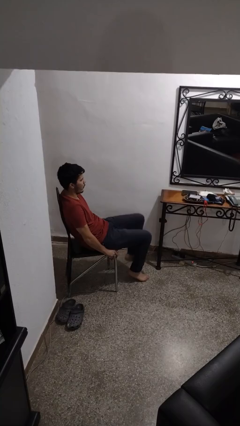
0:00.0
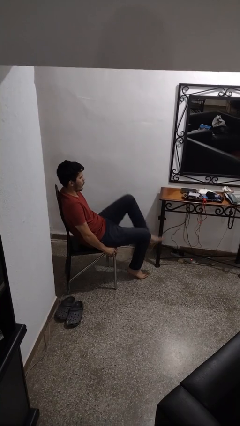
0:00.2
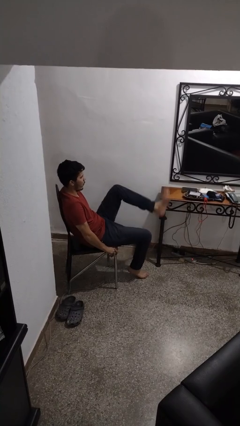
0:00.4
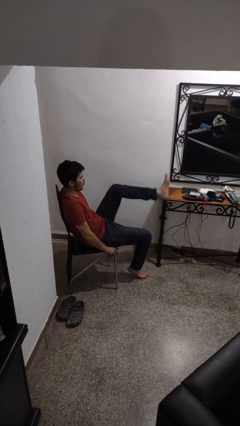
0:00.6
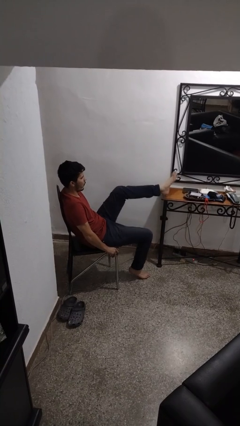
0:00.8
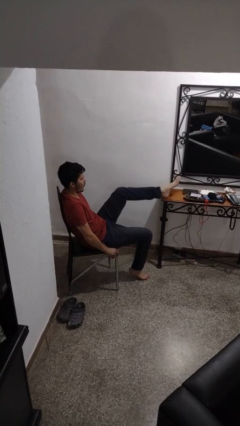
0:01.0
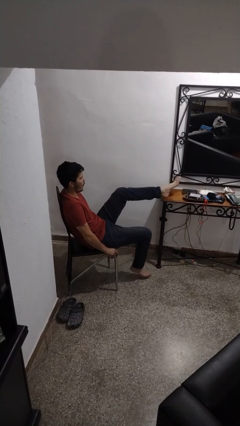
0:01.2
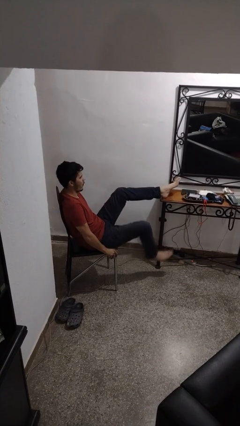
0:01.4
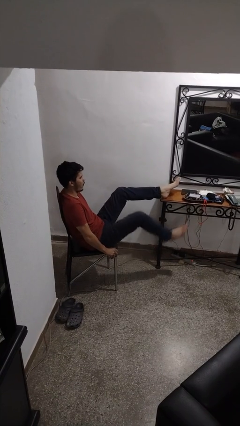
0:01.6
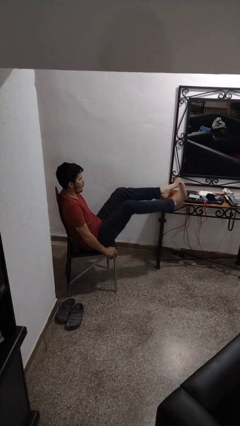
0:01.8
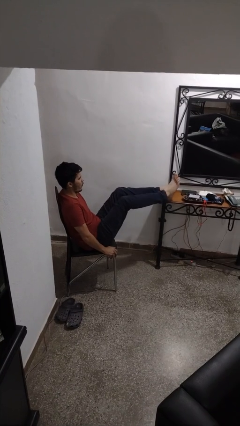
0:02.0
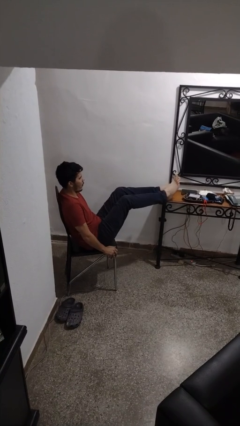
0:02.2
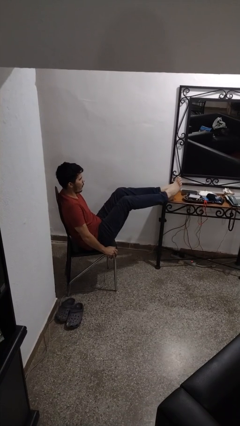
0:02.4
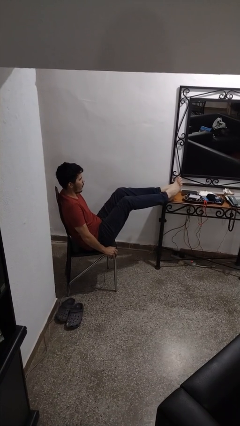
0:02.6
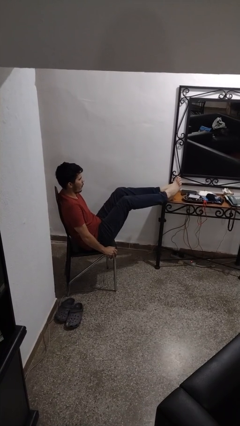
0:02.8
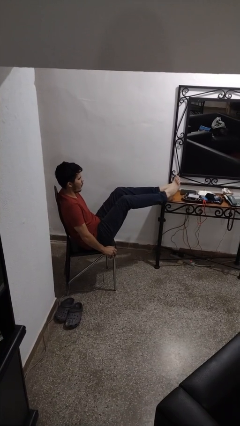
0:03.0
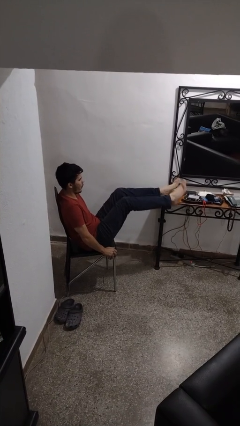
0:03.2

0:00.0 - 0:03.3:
person puts feet up

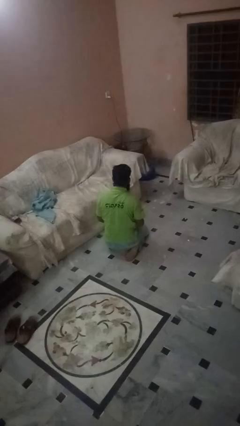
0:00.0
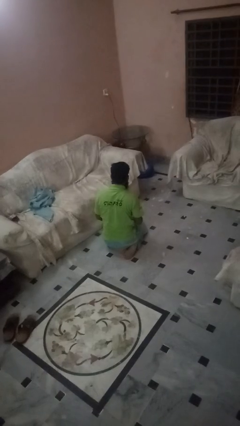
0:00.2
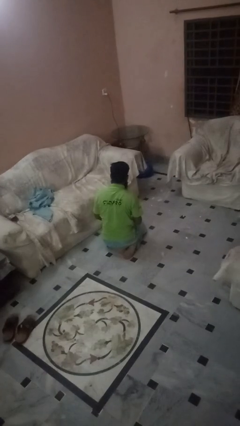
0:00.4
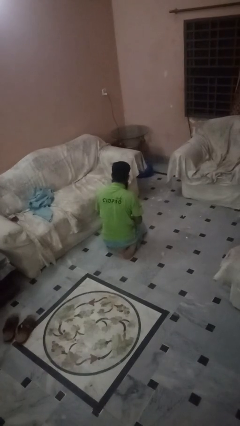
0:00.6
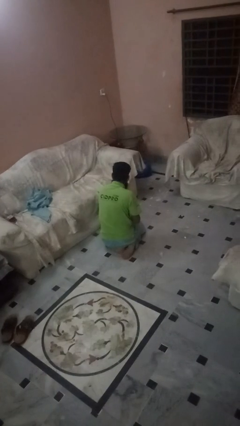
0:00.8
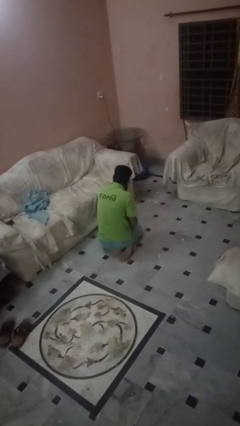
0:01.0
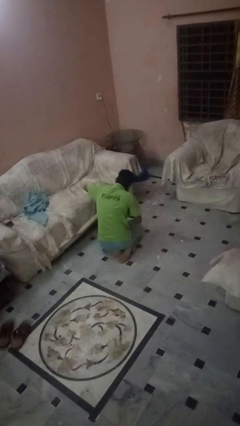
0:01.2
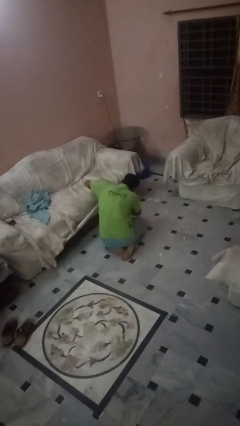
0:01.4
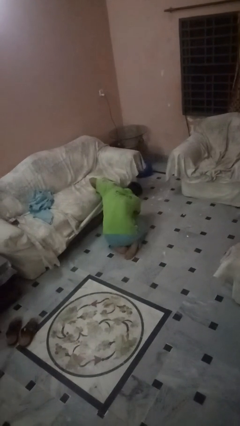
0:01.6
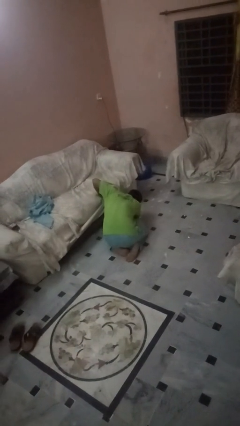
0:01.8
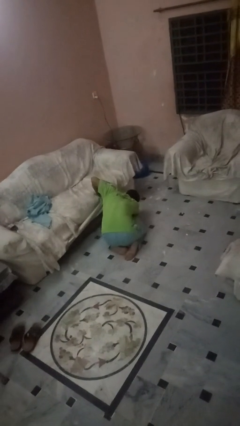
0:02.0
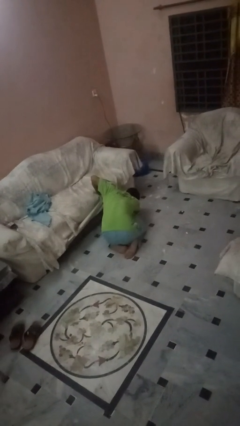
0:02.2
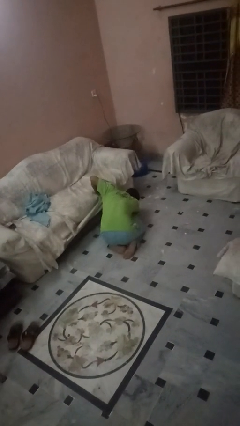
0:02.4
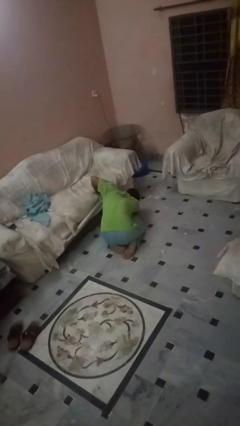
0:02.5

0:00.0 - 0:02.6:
person searches under couch

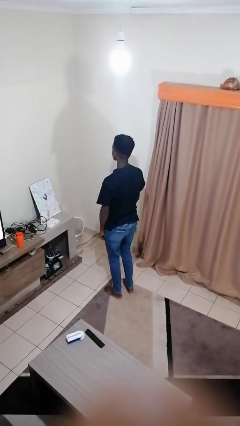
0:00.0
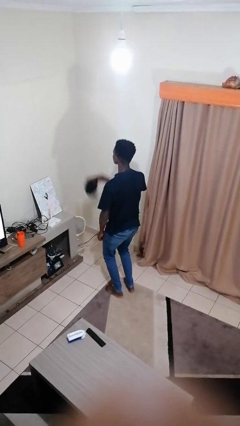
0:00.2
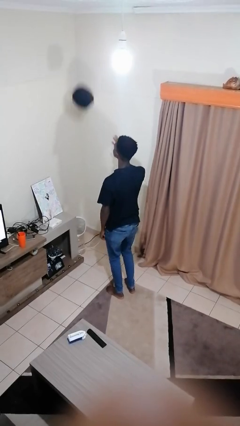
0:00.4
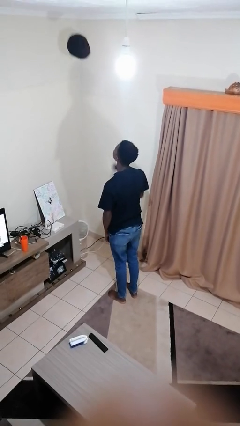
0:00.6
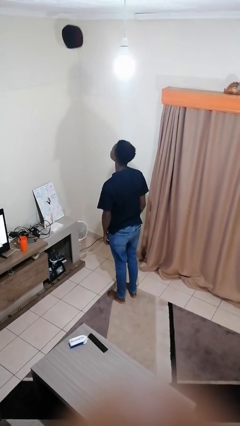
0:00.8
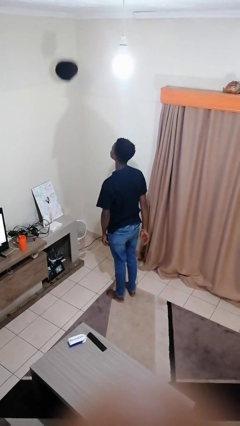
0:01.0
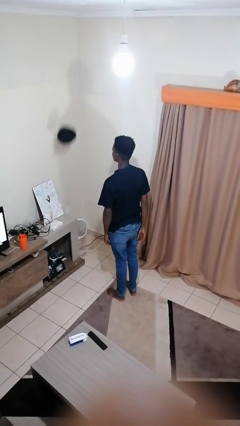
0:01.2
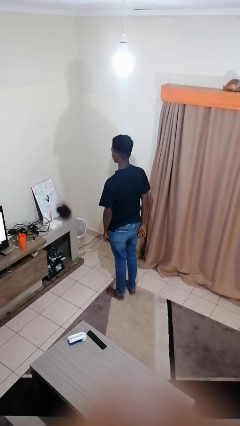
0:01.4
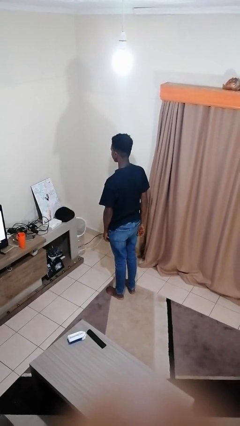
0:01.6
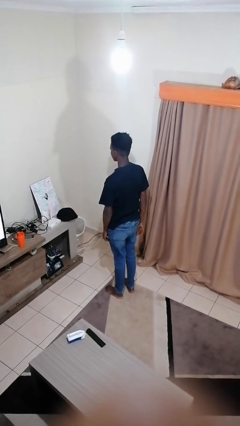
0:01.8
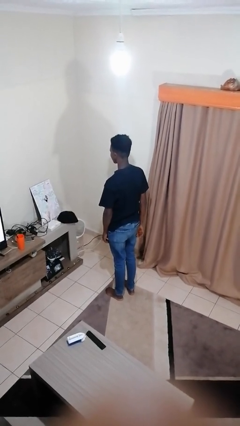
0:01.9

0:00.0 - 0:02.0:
person throws object into air

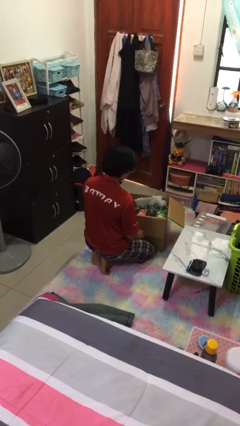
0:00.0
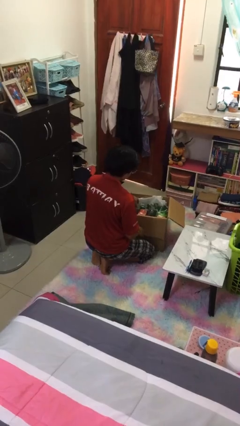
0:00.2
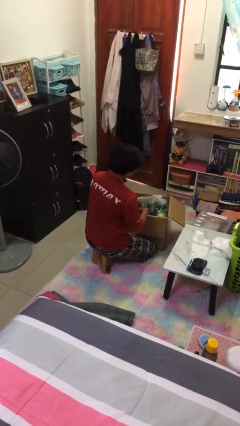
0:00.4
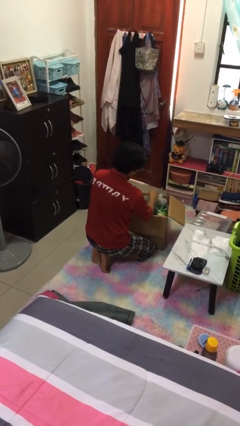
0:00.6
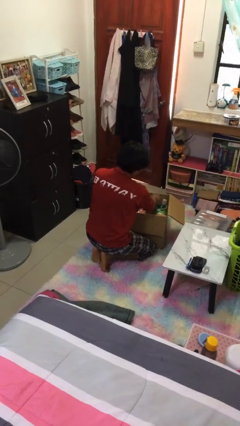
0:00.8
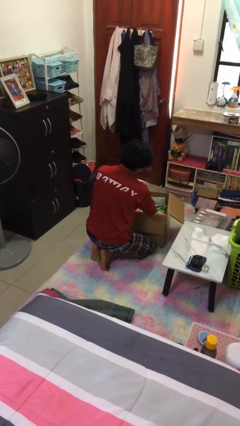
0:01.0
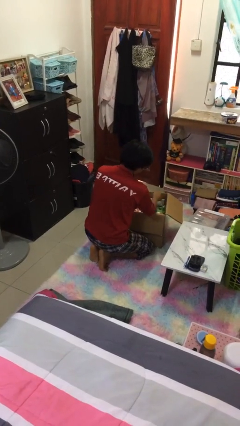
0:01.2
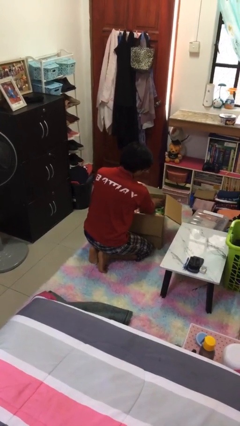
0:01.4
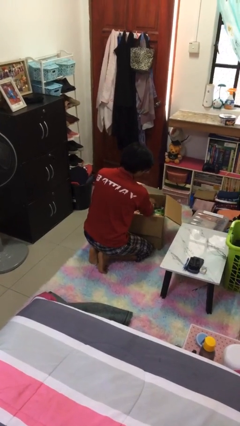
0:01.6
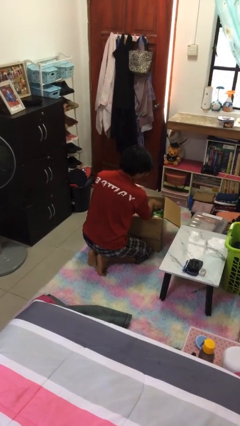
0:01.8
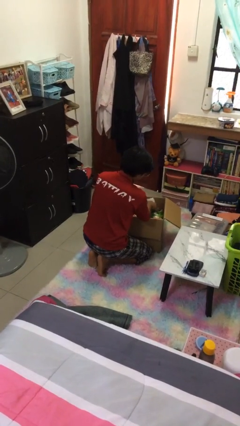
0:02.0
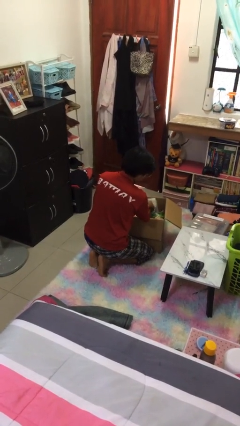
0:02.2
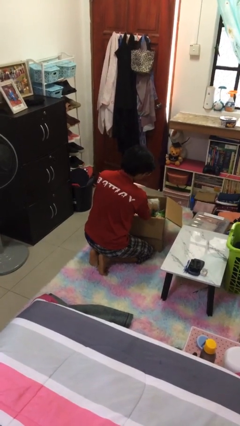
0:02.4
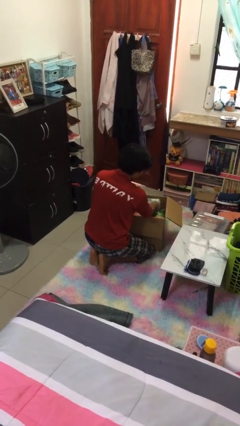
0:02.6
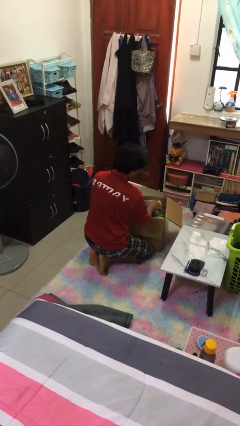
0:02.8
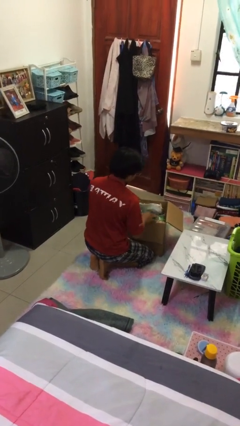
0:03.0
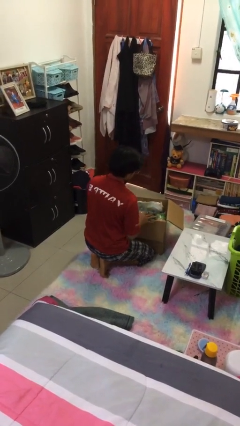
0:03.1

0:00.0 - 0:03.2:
person searches in box

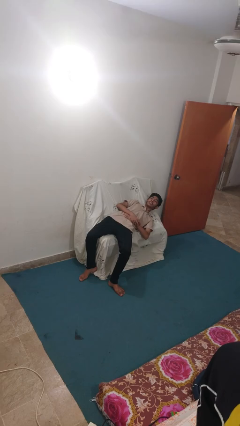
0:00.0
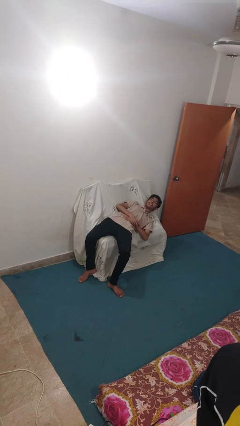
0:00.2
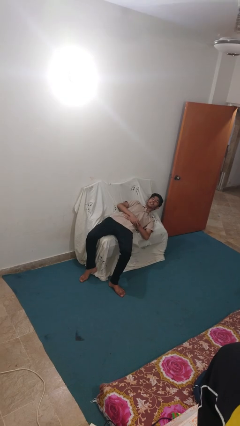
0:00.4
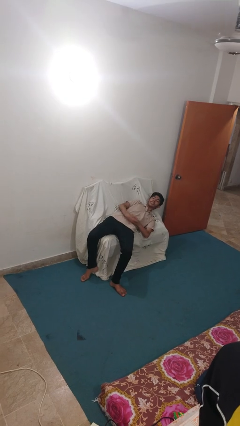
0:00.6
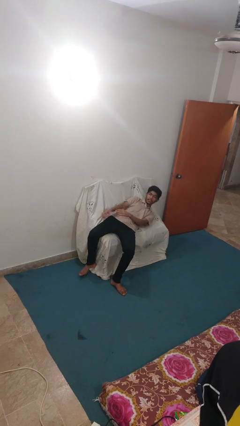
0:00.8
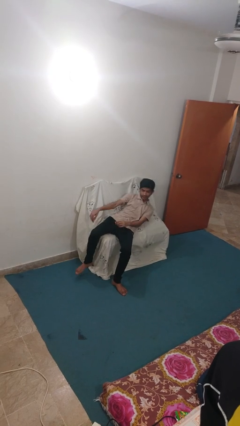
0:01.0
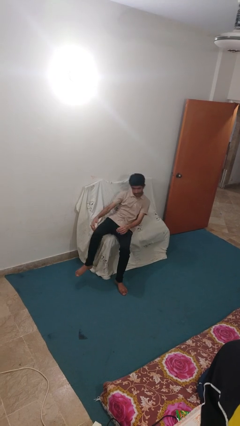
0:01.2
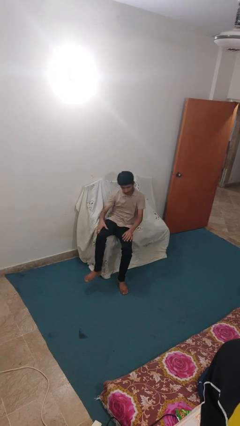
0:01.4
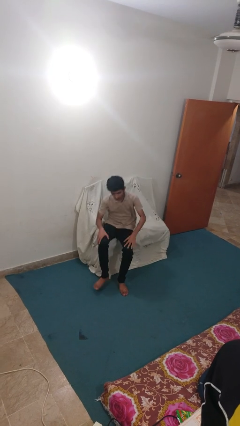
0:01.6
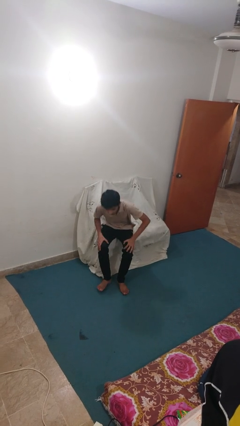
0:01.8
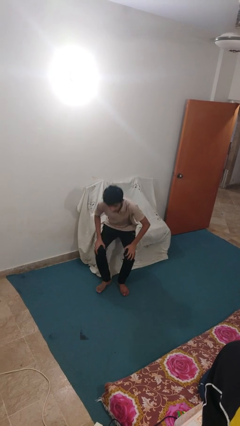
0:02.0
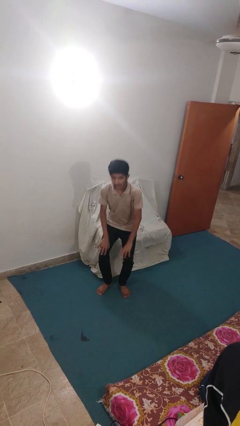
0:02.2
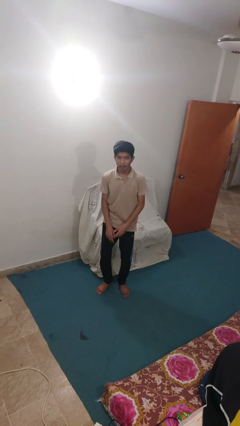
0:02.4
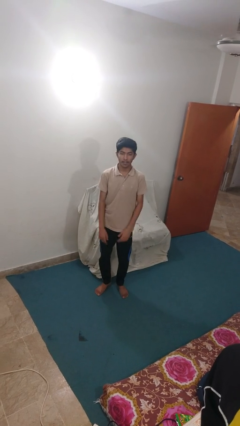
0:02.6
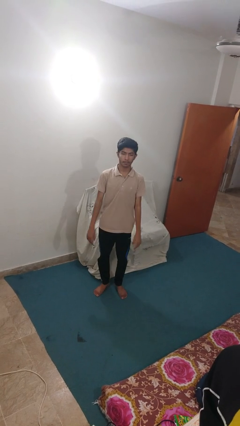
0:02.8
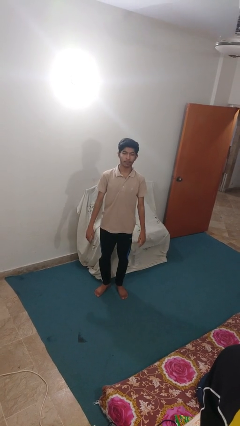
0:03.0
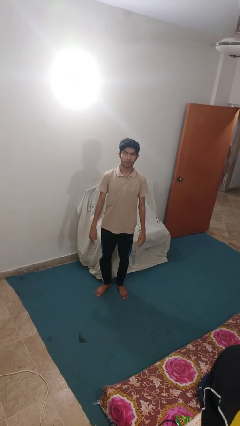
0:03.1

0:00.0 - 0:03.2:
person stands up

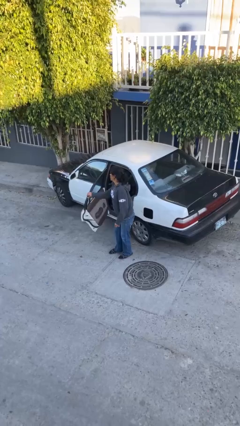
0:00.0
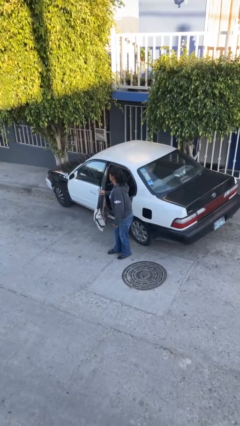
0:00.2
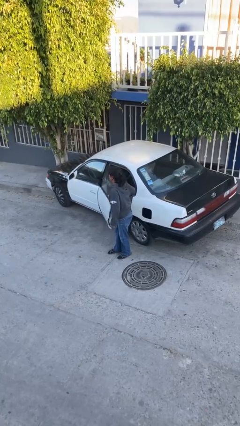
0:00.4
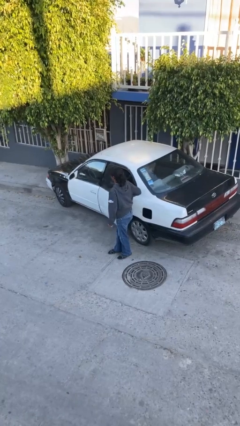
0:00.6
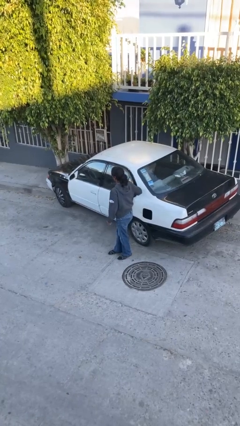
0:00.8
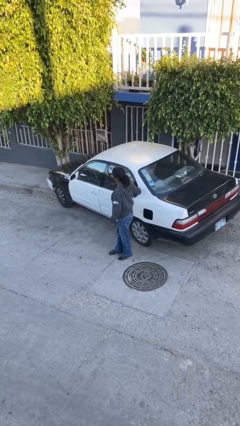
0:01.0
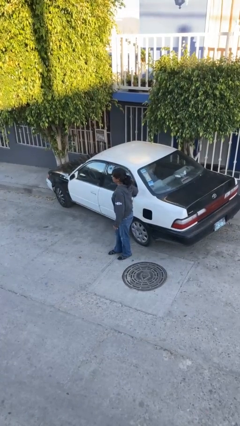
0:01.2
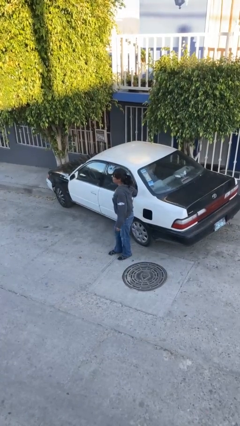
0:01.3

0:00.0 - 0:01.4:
person closes car door

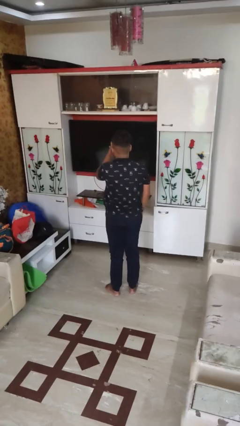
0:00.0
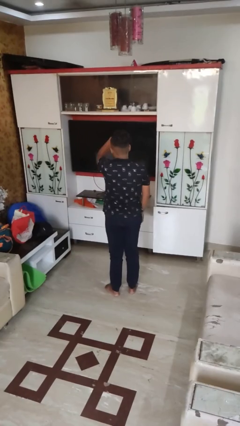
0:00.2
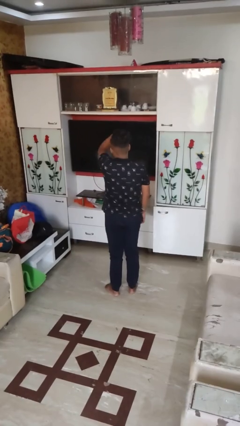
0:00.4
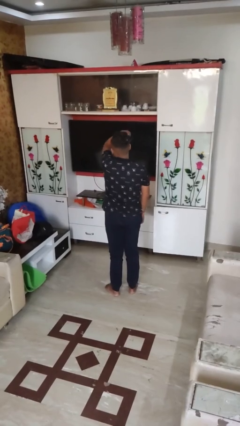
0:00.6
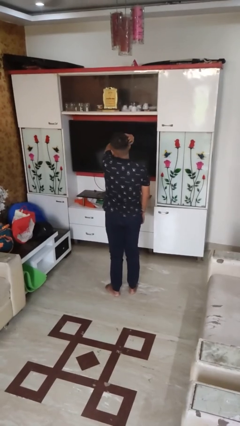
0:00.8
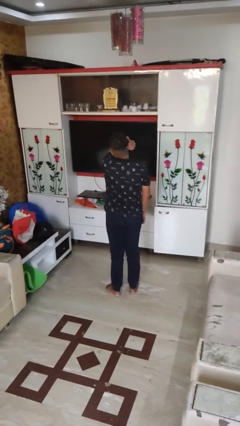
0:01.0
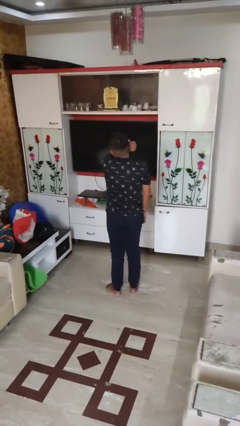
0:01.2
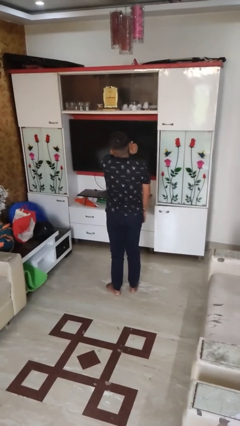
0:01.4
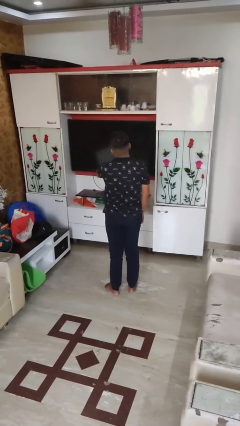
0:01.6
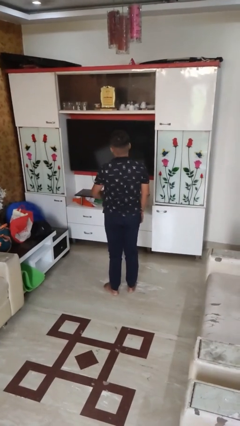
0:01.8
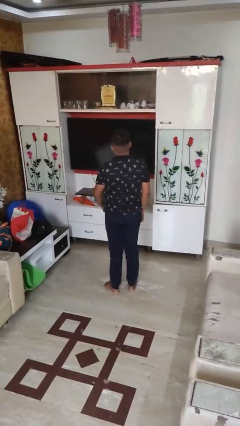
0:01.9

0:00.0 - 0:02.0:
person strokes hair
